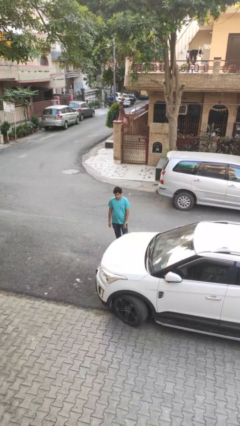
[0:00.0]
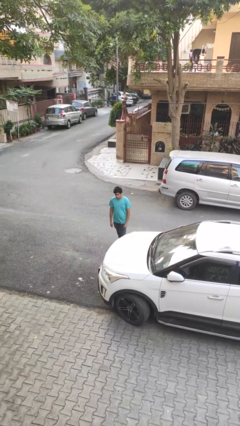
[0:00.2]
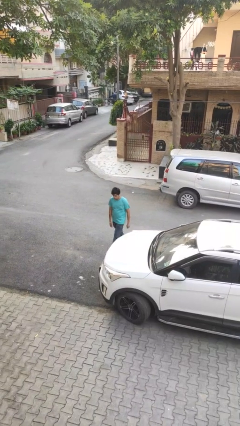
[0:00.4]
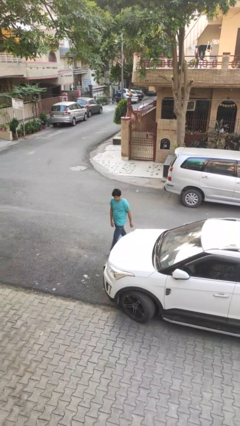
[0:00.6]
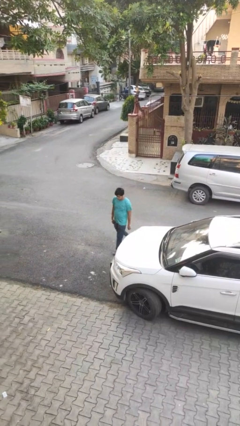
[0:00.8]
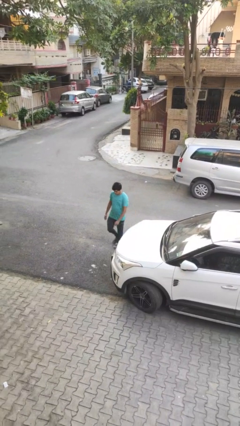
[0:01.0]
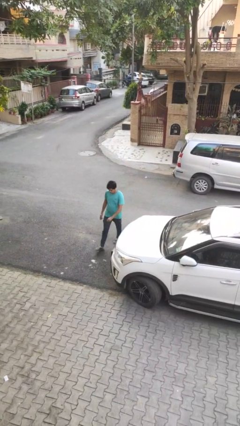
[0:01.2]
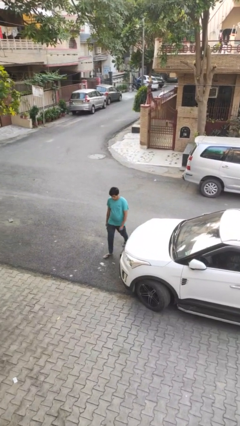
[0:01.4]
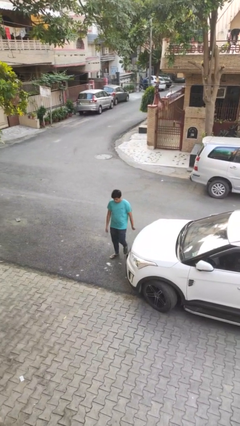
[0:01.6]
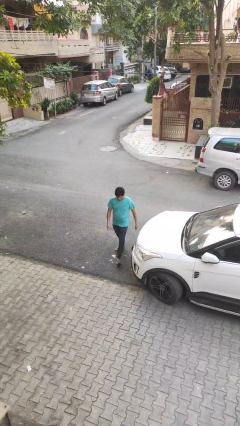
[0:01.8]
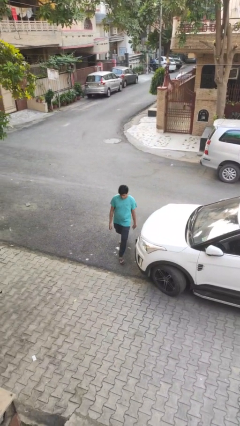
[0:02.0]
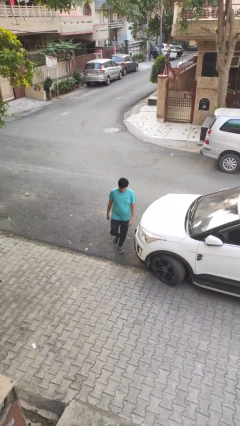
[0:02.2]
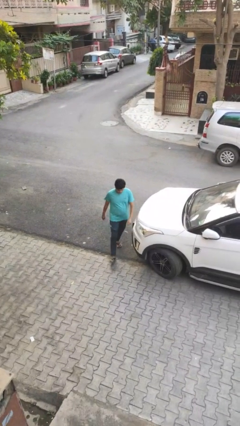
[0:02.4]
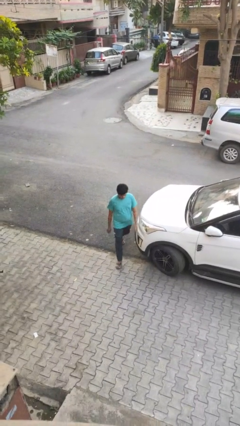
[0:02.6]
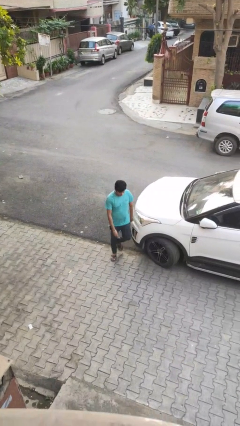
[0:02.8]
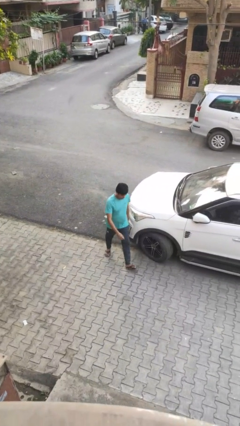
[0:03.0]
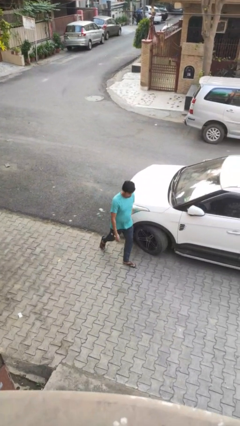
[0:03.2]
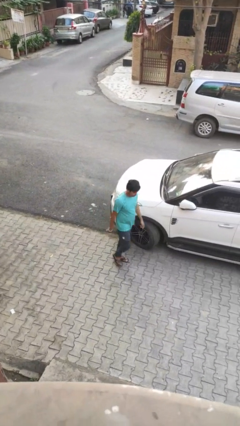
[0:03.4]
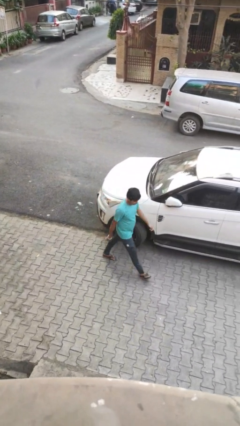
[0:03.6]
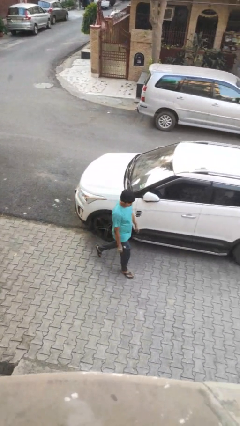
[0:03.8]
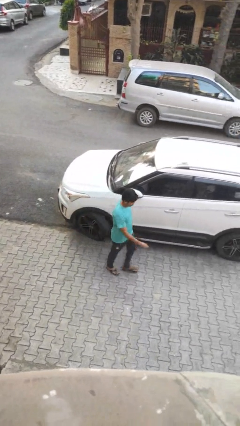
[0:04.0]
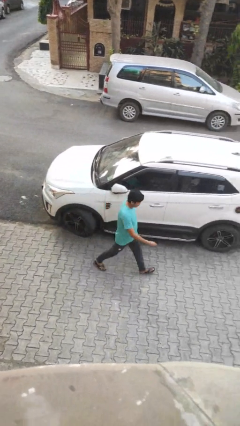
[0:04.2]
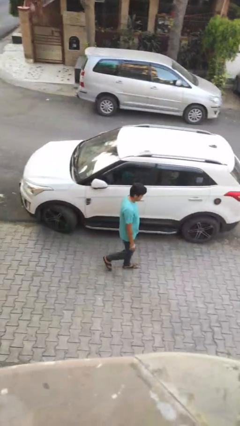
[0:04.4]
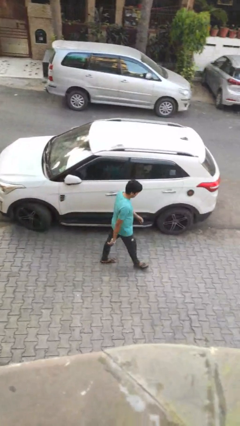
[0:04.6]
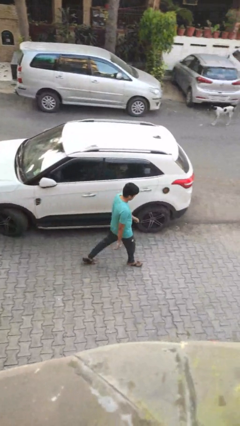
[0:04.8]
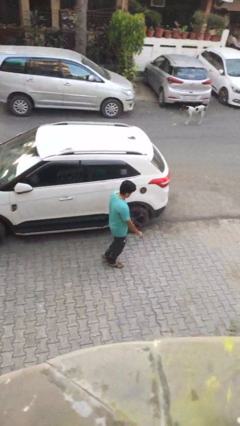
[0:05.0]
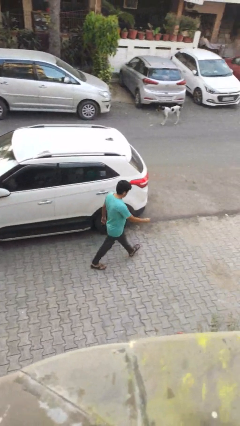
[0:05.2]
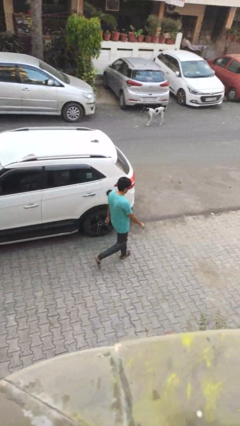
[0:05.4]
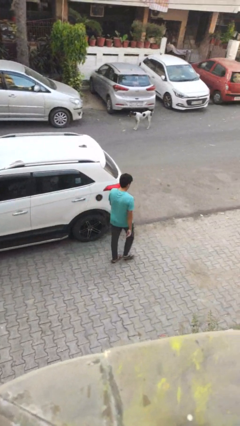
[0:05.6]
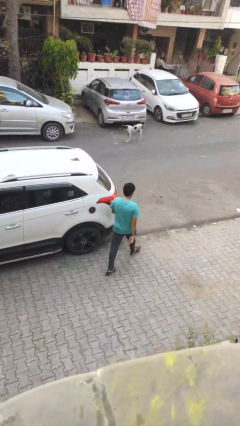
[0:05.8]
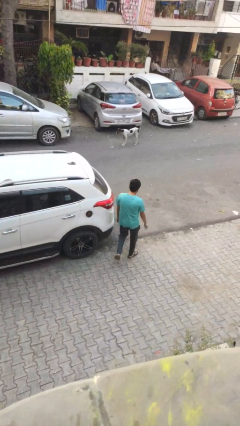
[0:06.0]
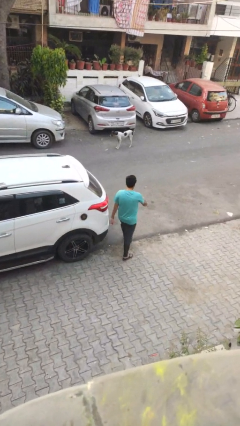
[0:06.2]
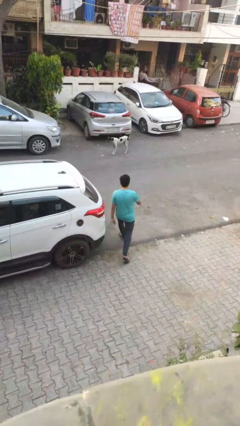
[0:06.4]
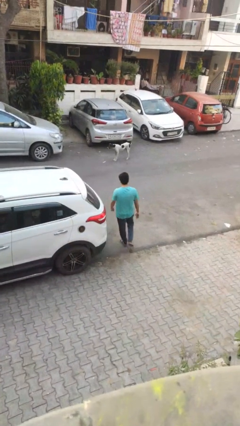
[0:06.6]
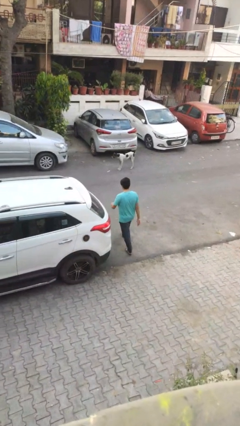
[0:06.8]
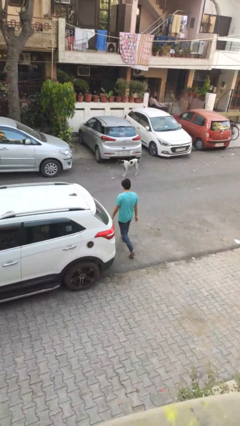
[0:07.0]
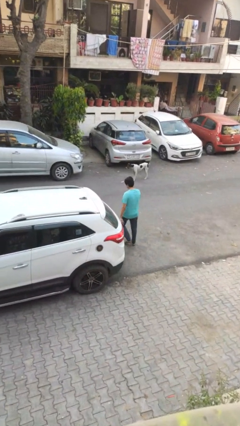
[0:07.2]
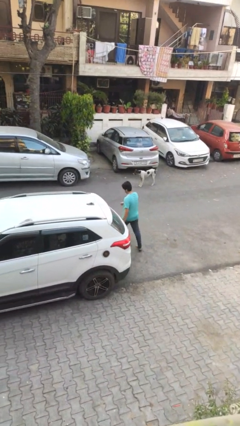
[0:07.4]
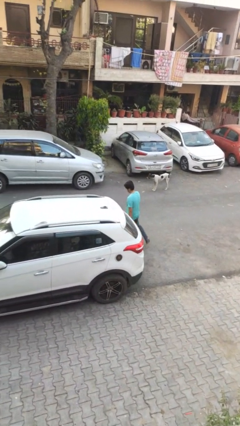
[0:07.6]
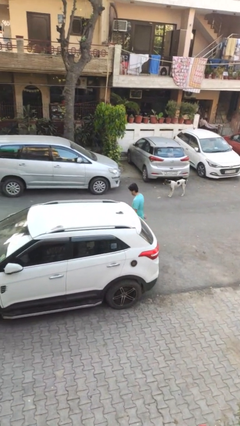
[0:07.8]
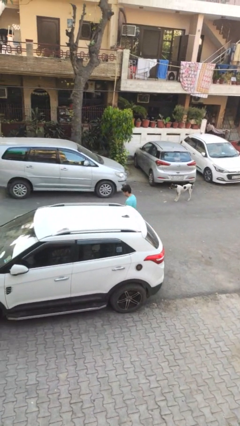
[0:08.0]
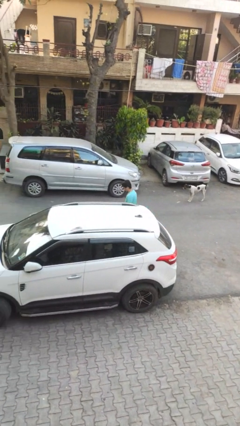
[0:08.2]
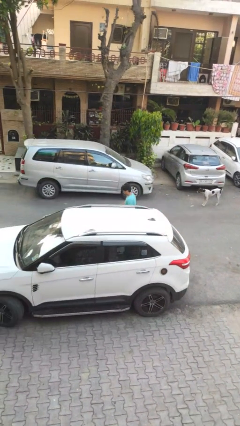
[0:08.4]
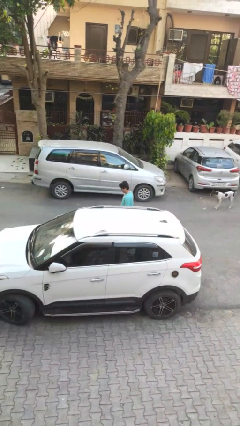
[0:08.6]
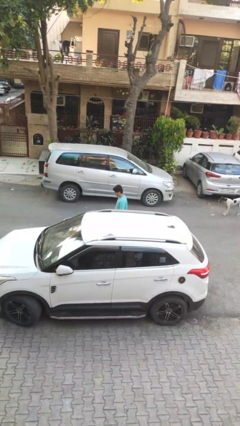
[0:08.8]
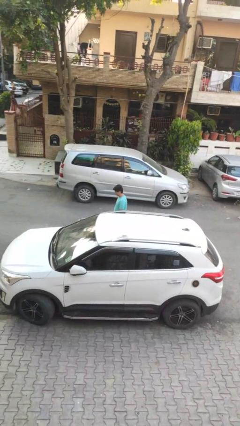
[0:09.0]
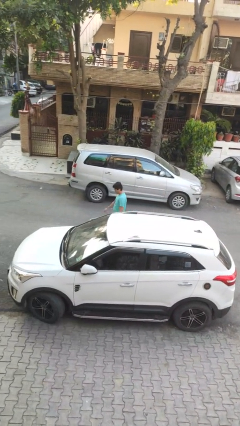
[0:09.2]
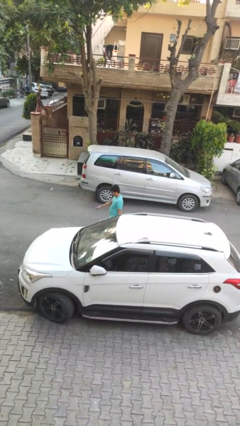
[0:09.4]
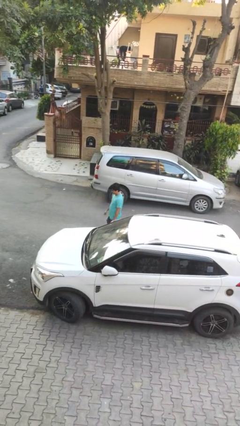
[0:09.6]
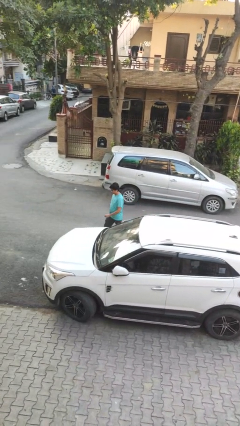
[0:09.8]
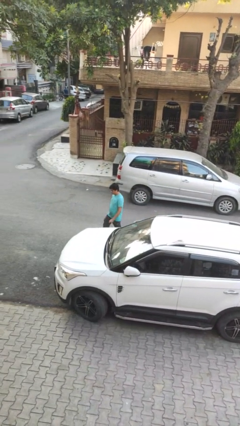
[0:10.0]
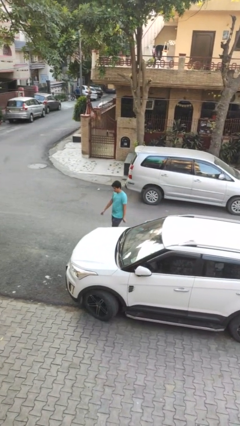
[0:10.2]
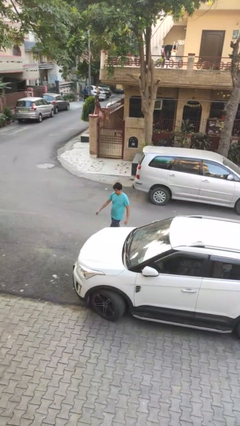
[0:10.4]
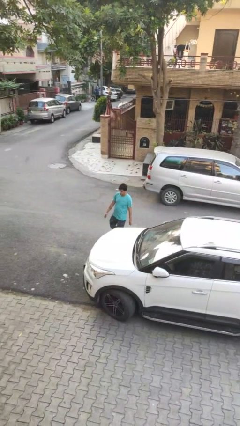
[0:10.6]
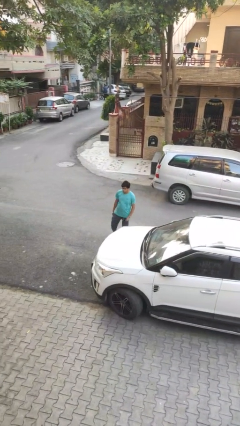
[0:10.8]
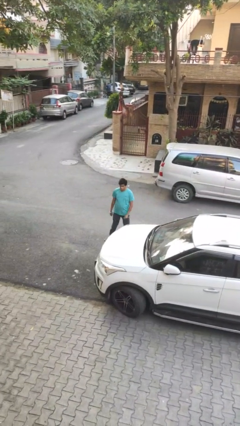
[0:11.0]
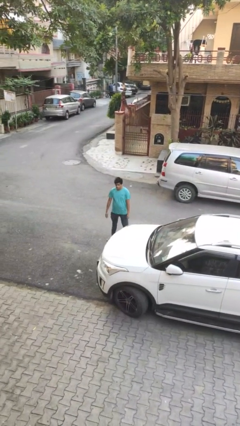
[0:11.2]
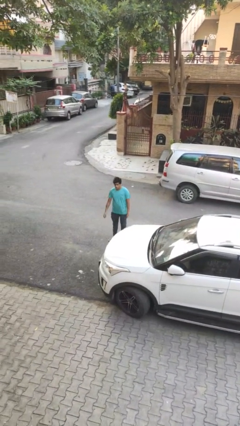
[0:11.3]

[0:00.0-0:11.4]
person walks around car

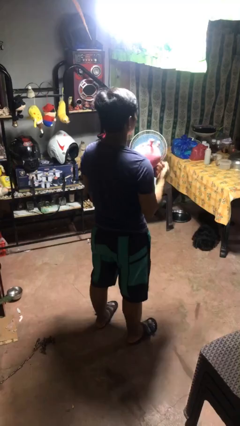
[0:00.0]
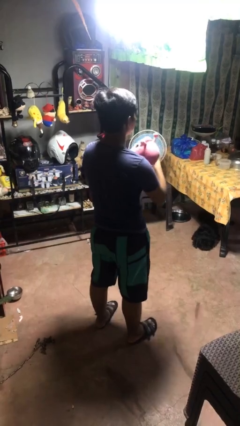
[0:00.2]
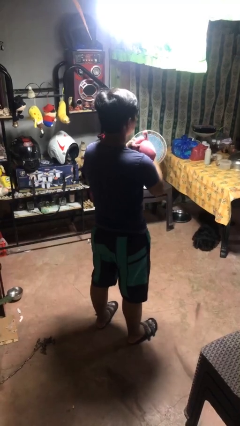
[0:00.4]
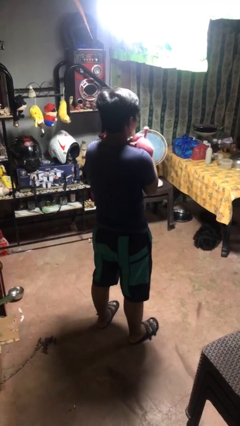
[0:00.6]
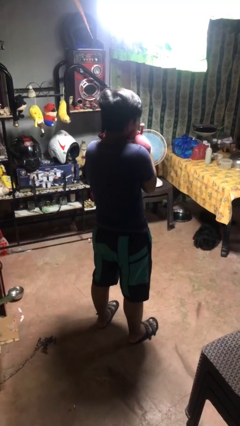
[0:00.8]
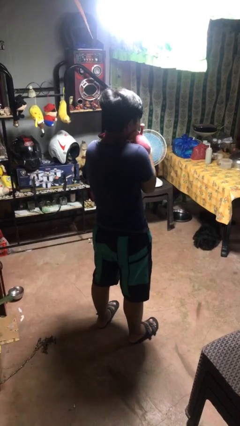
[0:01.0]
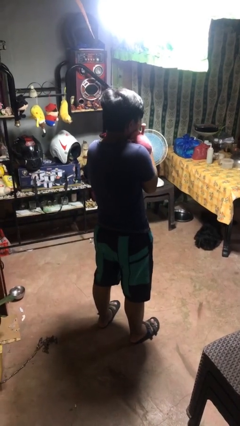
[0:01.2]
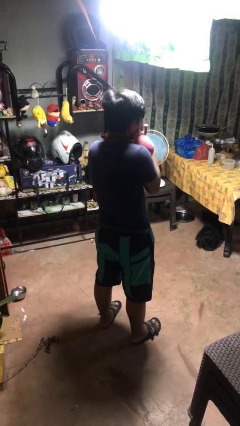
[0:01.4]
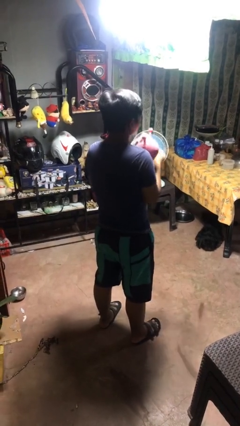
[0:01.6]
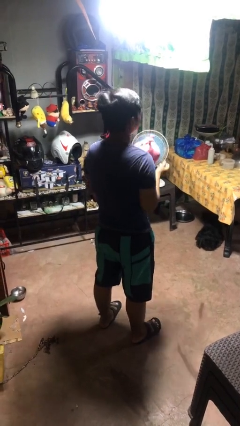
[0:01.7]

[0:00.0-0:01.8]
person hugs stuffed animal

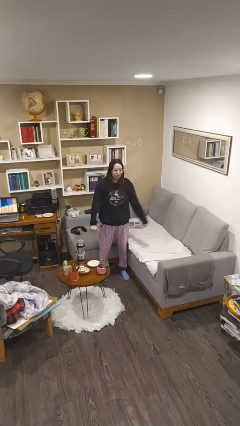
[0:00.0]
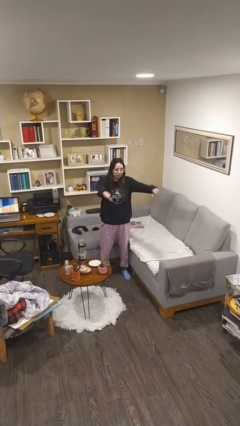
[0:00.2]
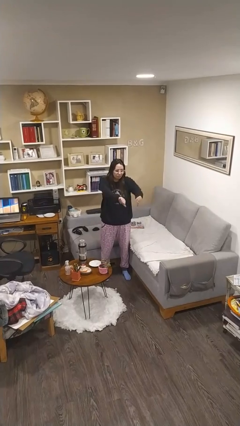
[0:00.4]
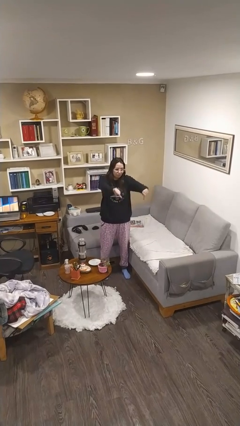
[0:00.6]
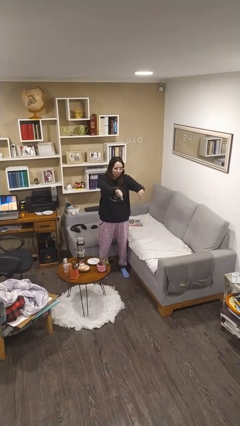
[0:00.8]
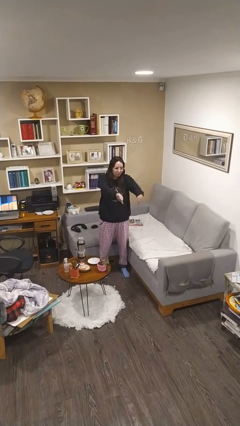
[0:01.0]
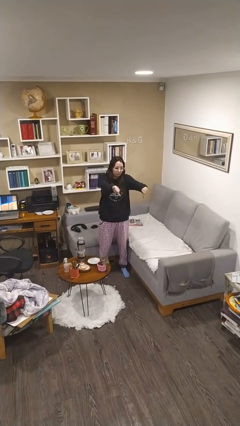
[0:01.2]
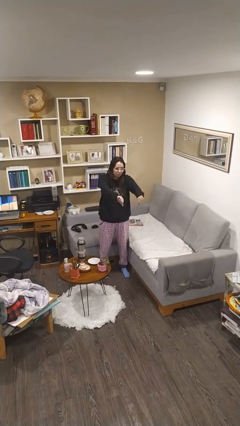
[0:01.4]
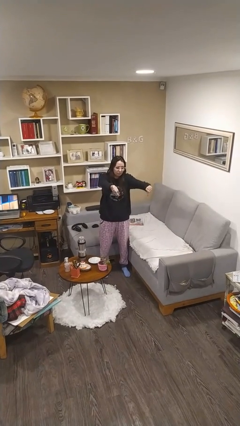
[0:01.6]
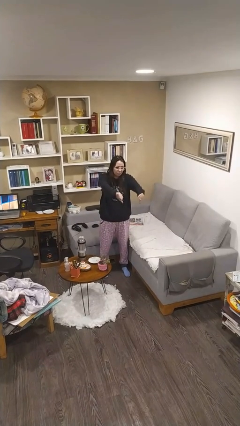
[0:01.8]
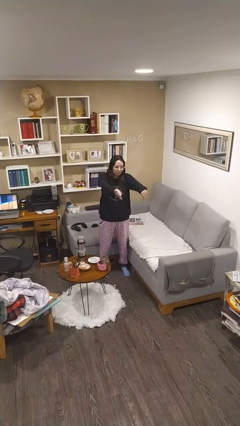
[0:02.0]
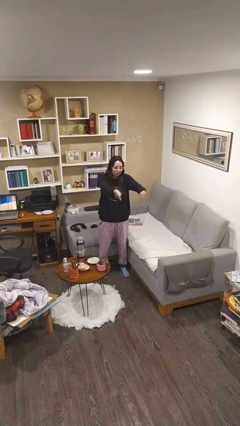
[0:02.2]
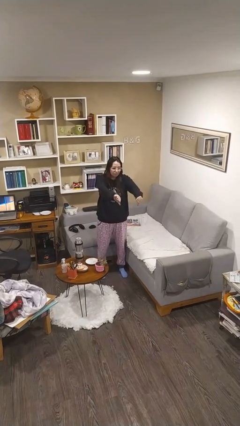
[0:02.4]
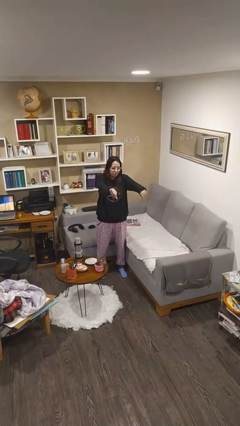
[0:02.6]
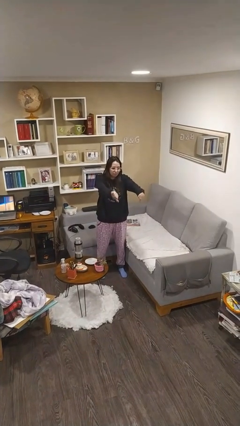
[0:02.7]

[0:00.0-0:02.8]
person gestures thumbs down

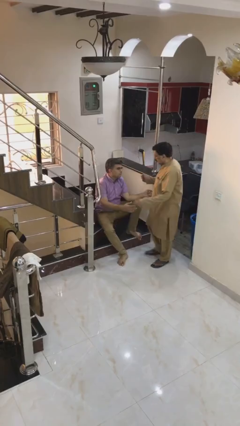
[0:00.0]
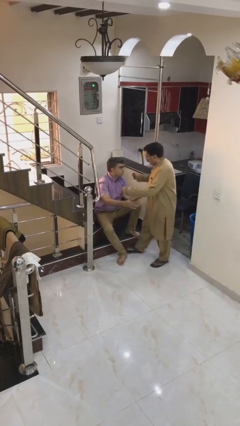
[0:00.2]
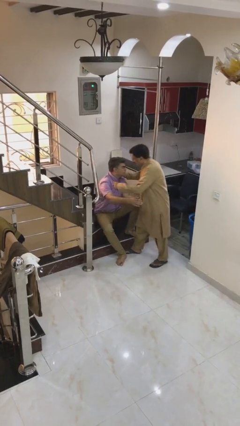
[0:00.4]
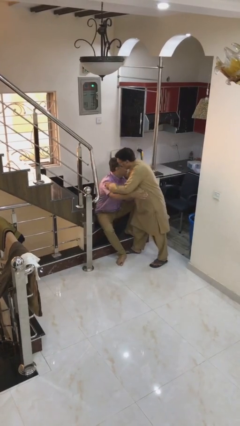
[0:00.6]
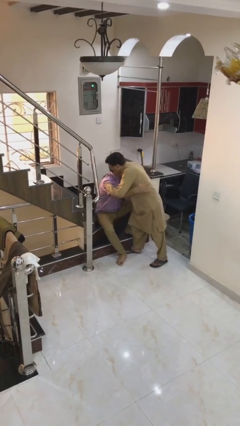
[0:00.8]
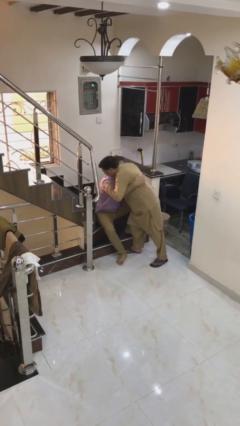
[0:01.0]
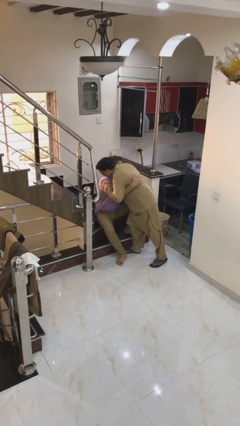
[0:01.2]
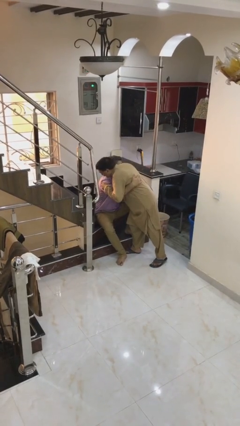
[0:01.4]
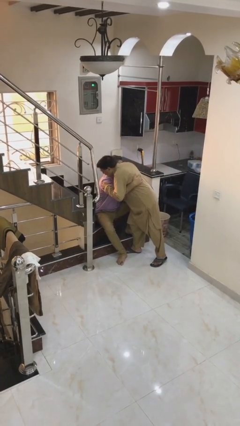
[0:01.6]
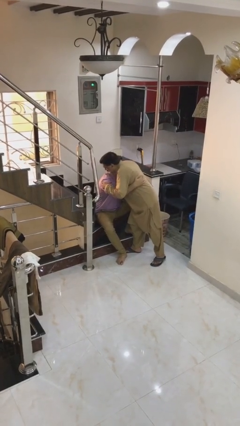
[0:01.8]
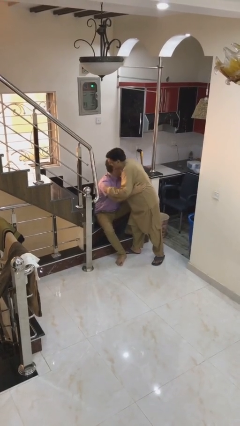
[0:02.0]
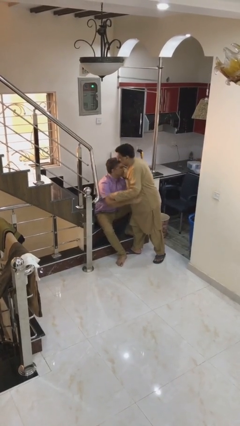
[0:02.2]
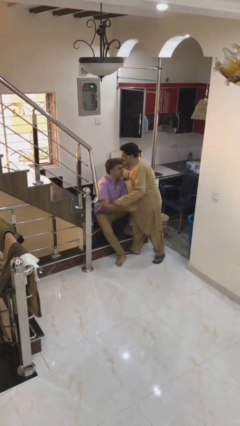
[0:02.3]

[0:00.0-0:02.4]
person embraces person
